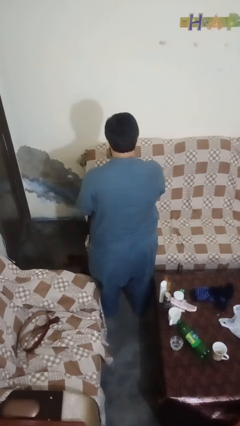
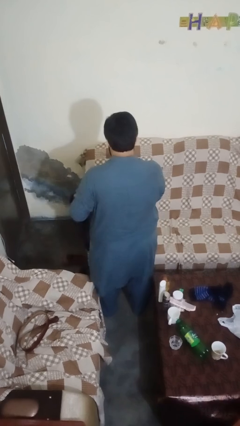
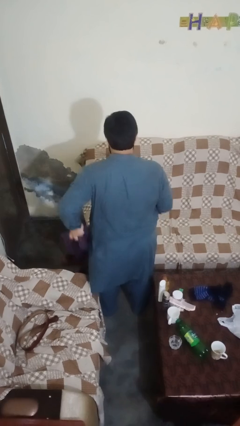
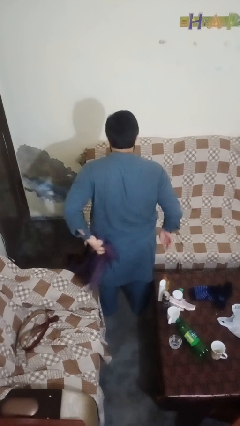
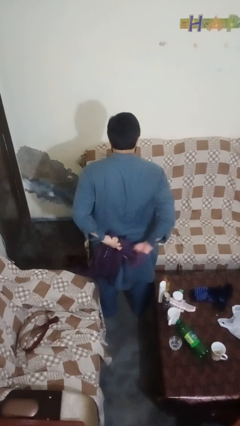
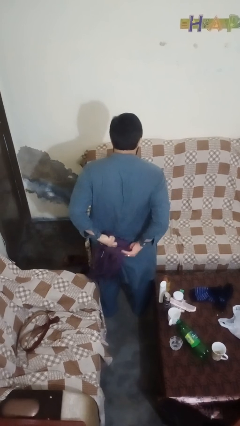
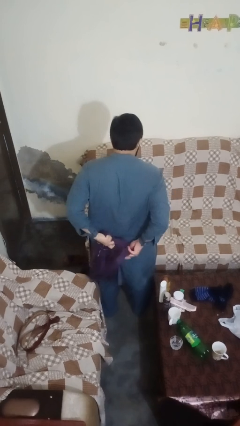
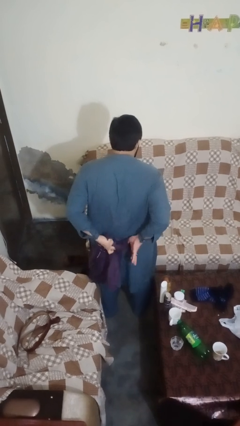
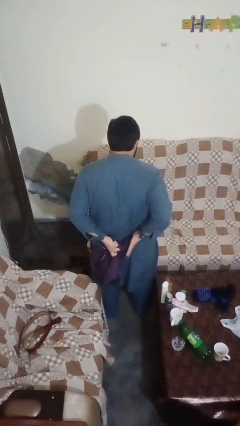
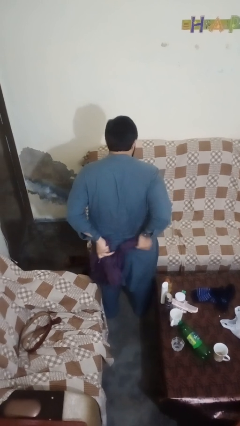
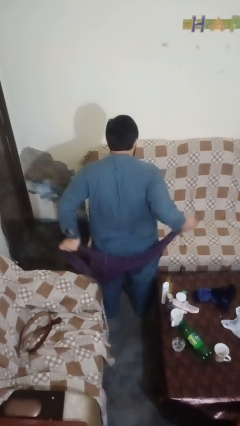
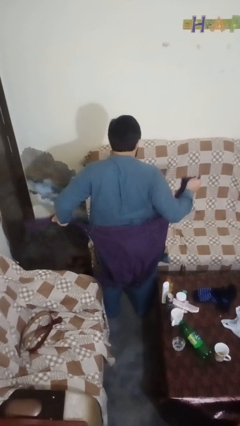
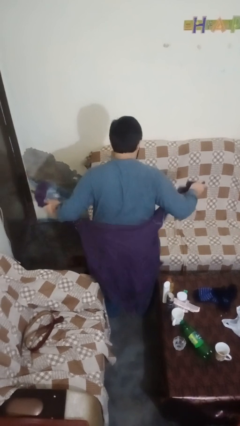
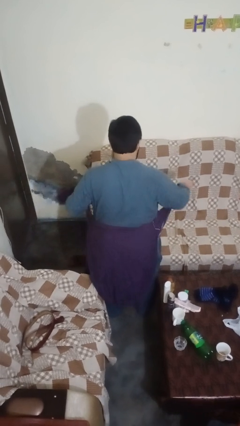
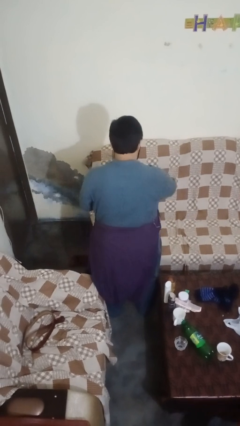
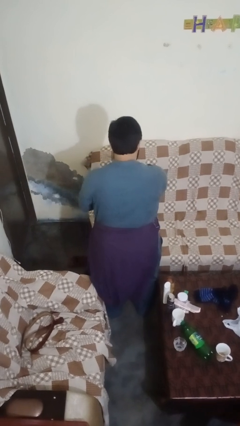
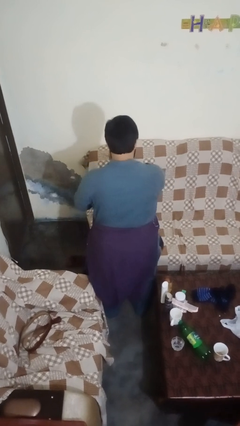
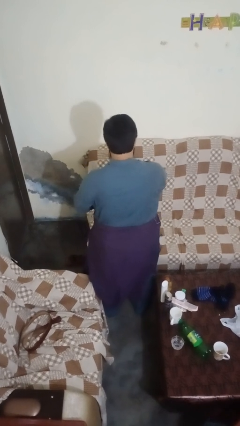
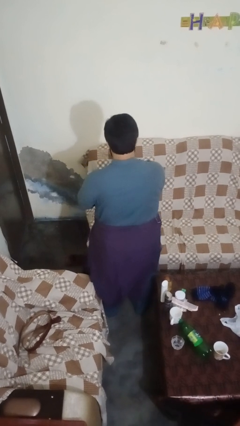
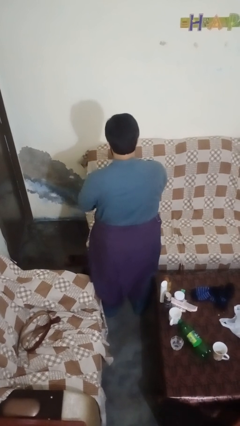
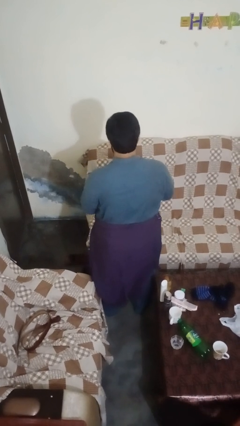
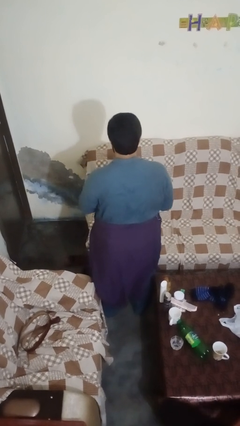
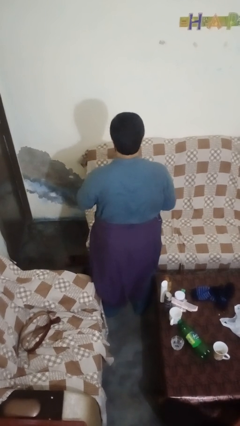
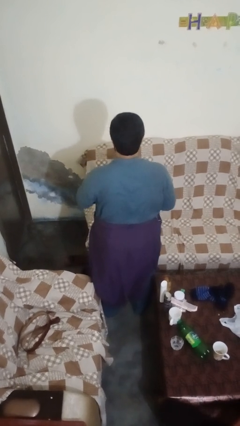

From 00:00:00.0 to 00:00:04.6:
person ties jacket around waist

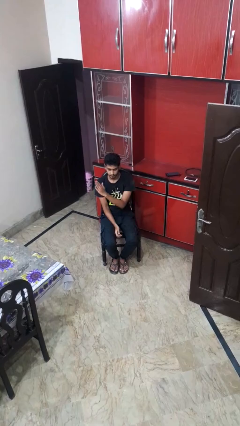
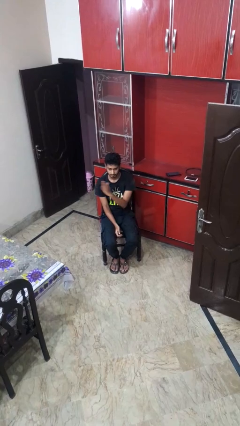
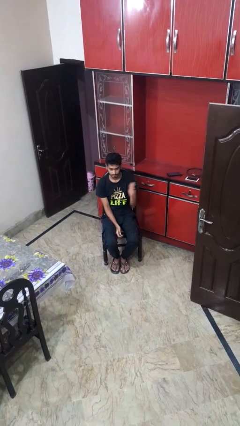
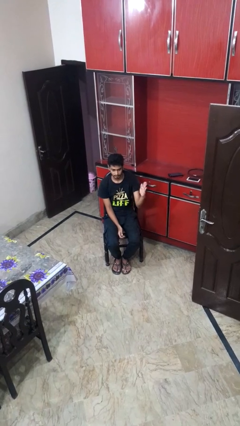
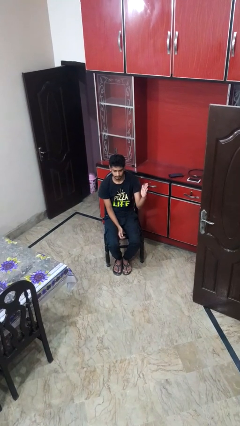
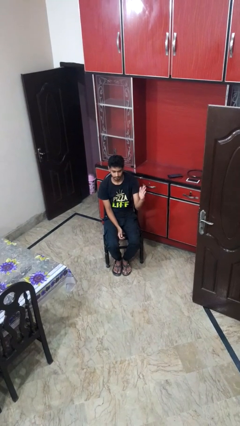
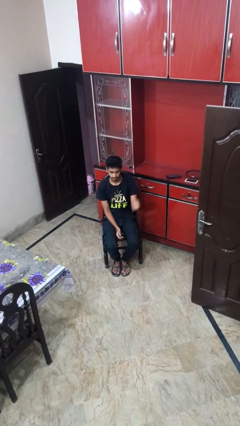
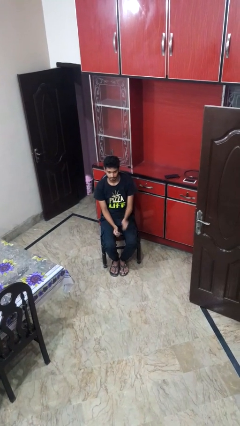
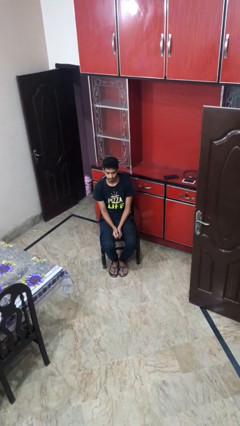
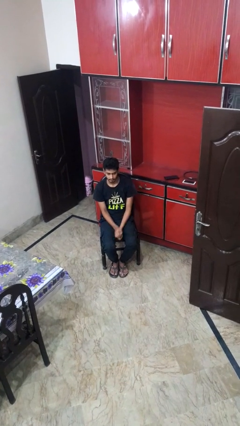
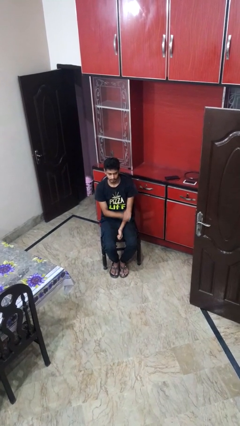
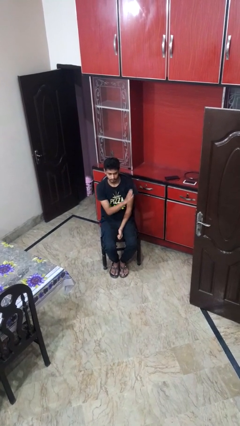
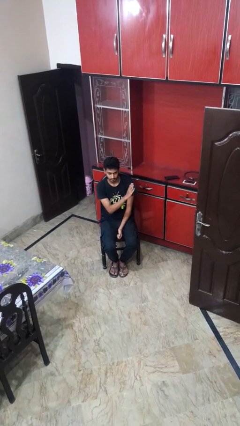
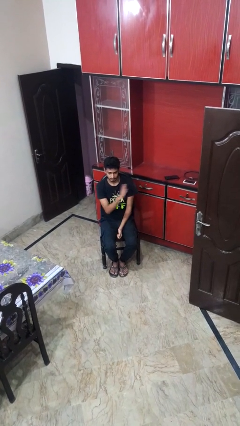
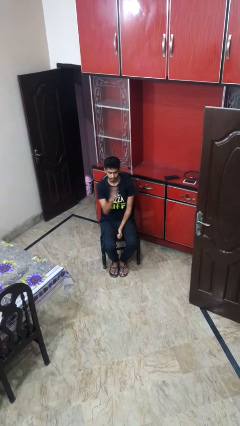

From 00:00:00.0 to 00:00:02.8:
person gestures swipe left

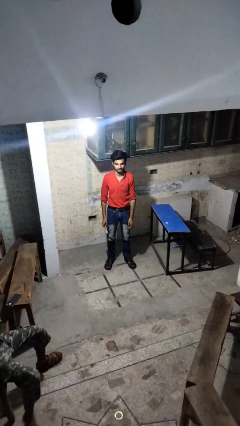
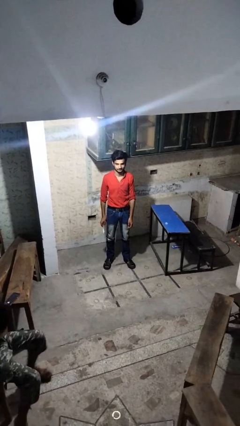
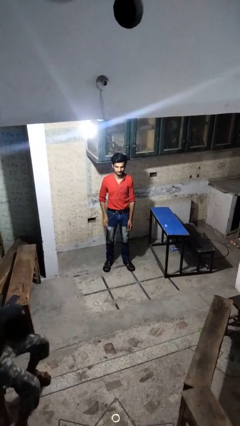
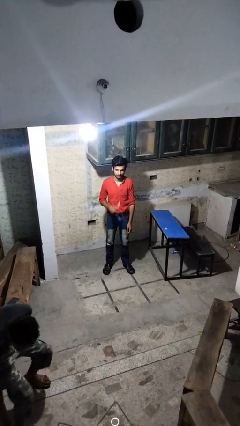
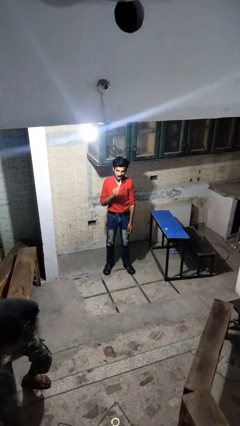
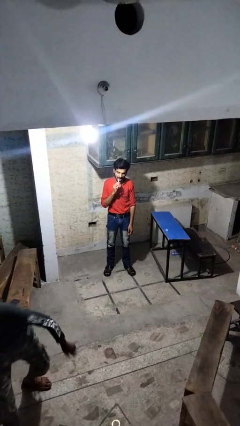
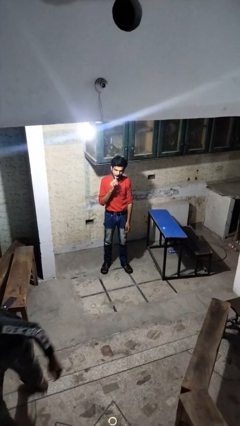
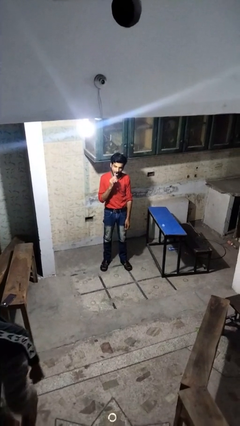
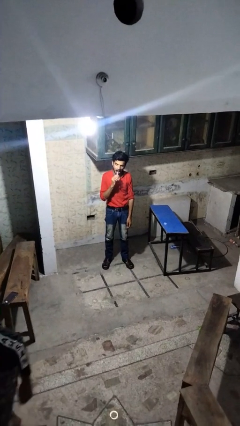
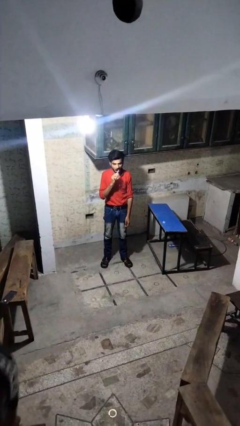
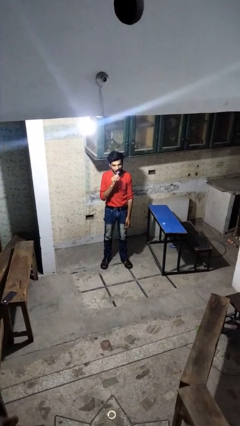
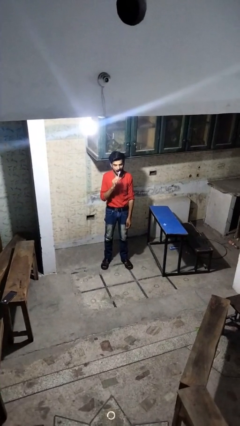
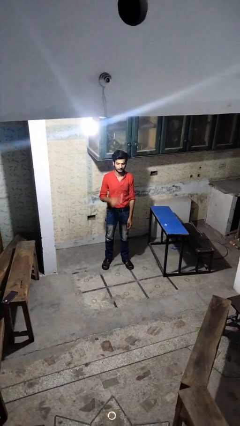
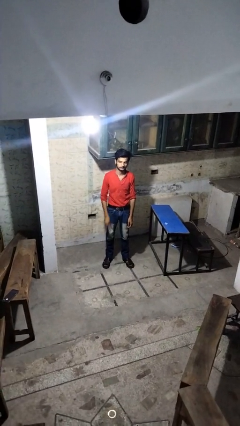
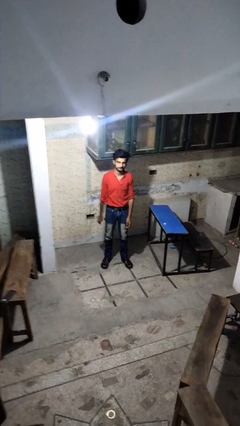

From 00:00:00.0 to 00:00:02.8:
person brushes teeth

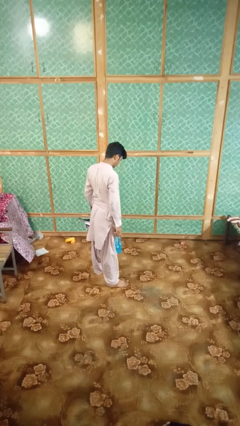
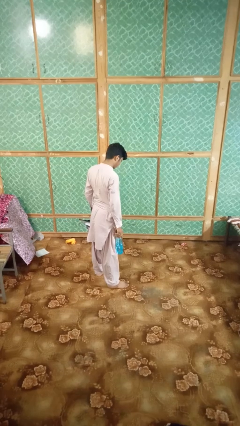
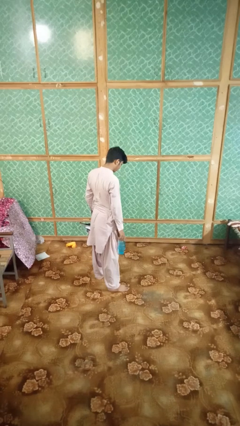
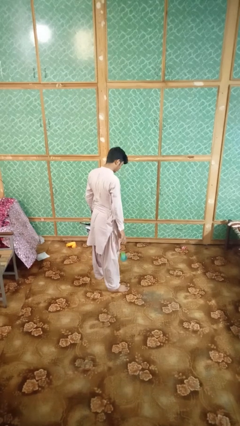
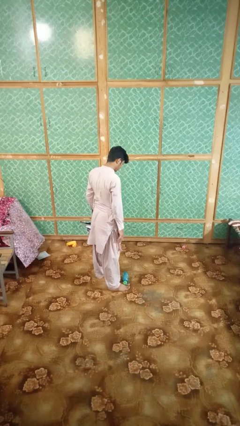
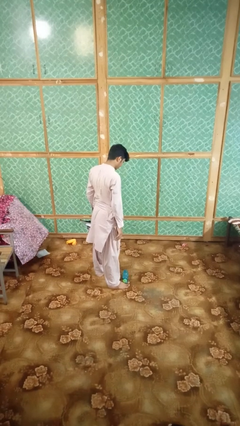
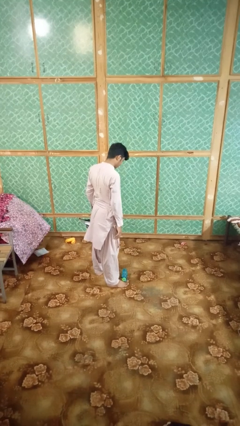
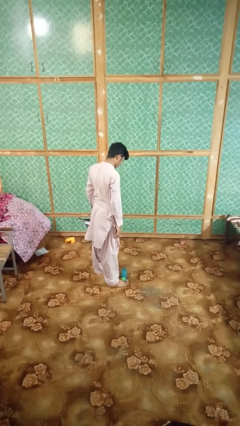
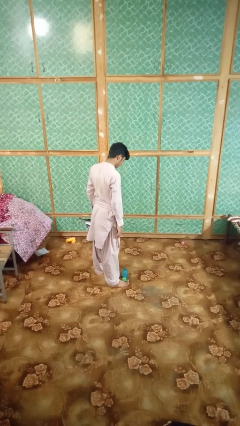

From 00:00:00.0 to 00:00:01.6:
person drops object

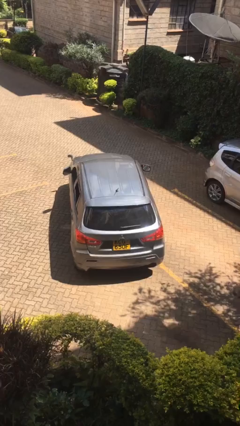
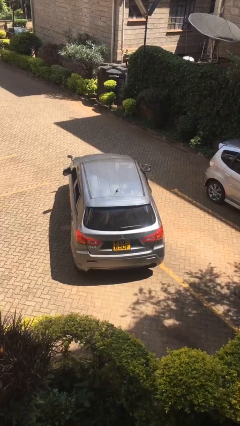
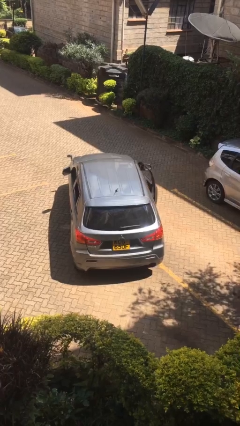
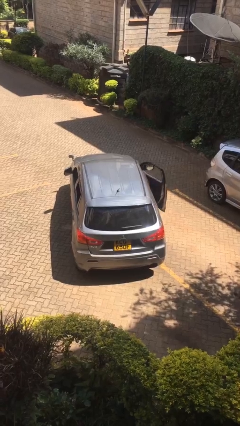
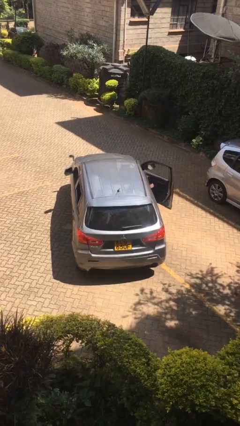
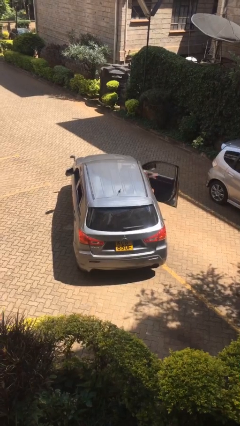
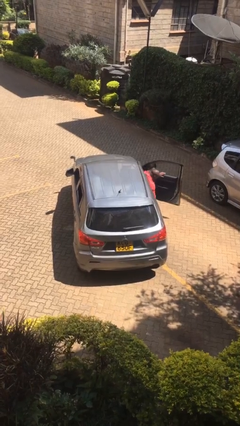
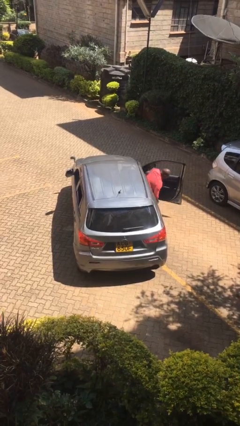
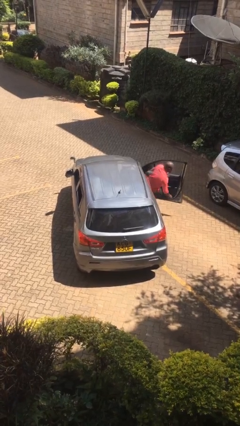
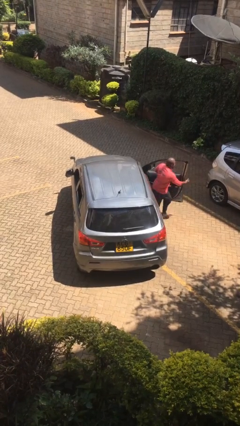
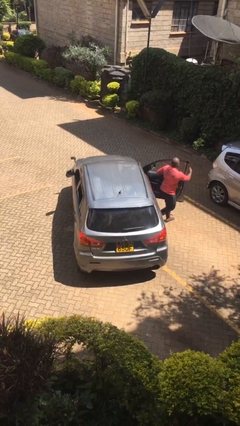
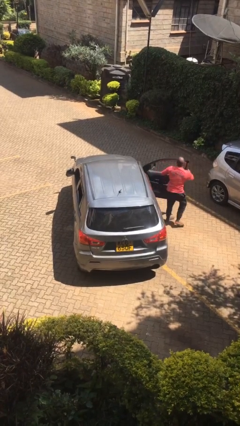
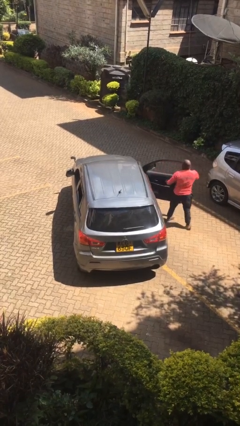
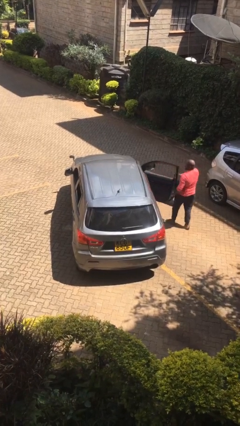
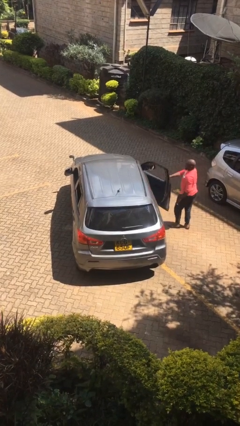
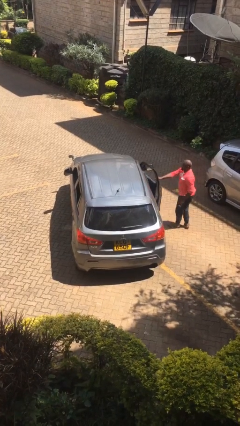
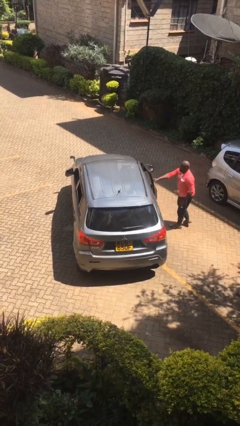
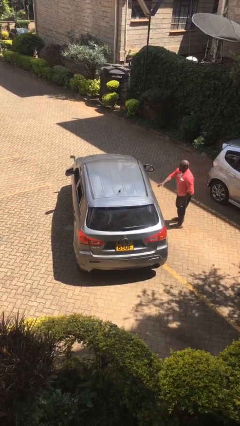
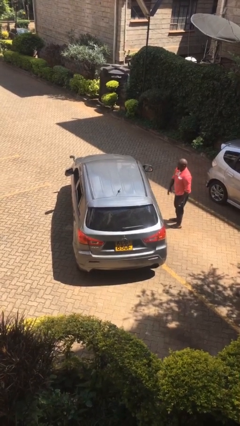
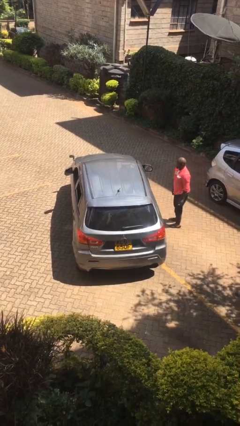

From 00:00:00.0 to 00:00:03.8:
car drops off person

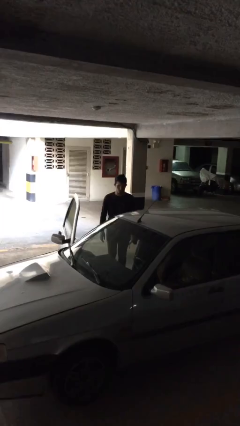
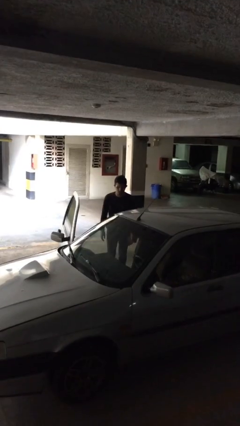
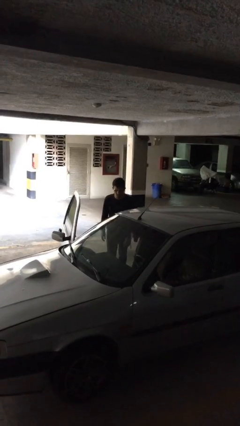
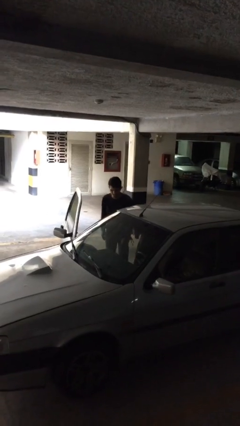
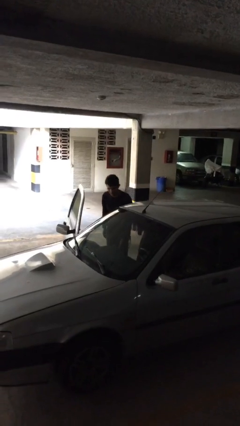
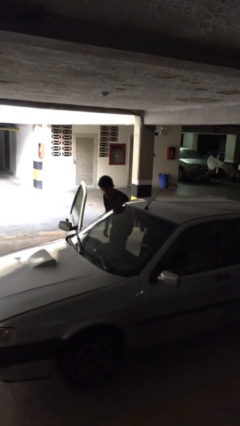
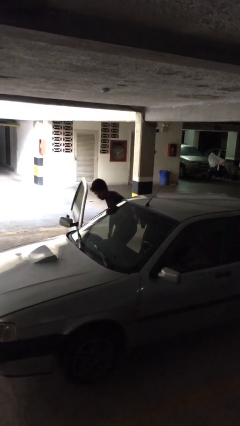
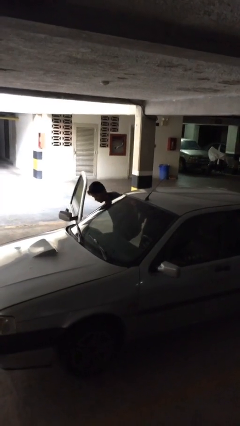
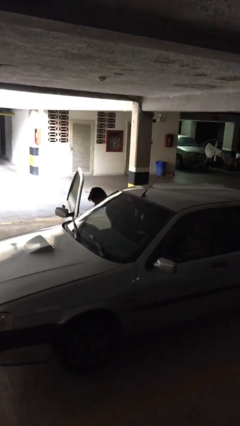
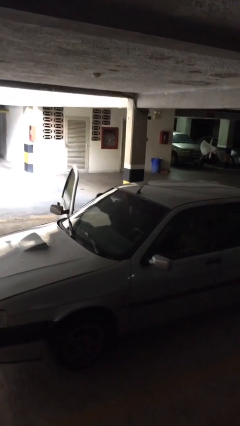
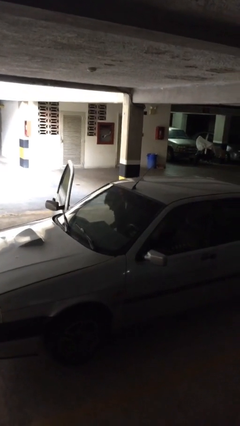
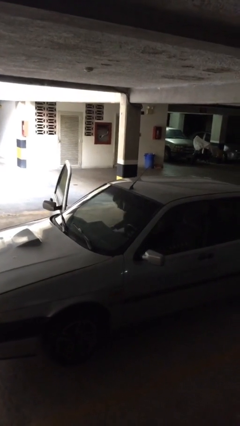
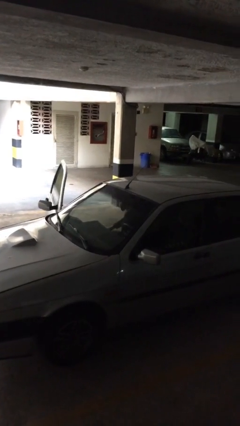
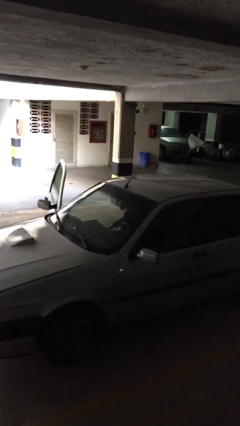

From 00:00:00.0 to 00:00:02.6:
person enters car
